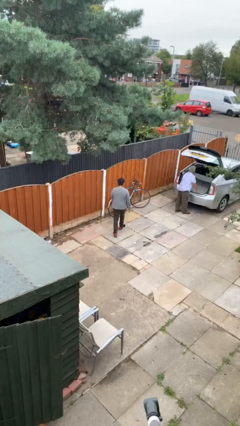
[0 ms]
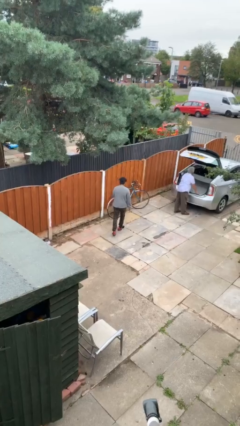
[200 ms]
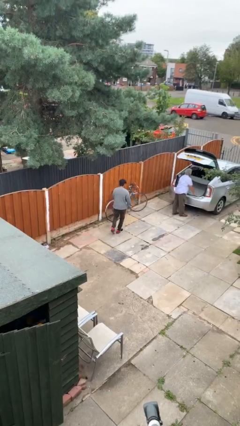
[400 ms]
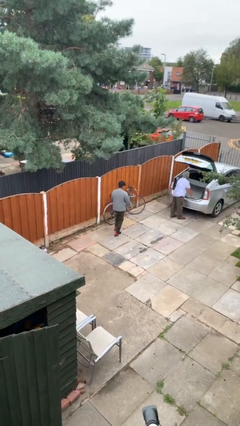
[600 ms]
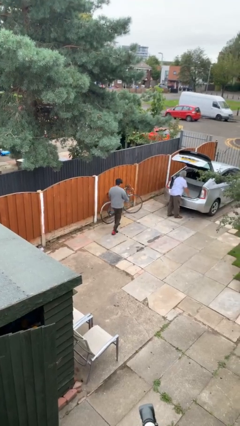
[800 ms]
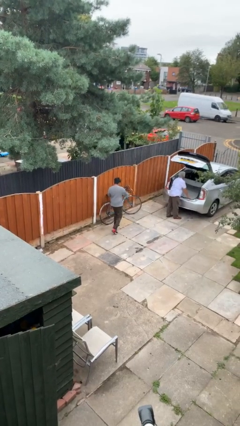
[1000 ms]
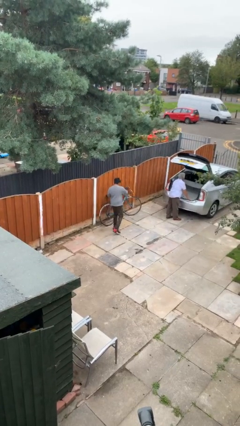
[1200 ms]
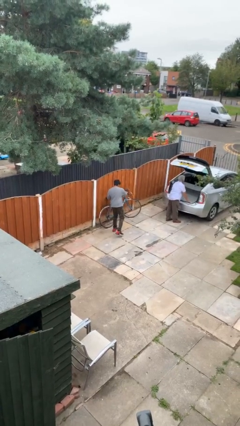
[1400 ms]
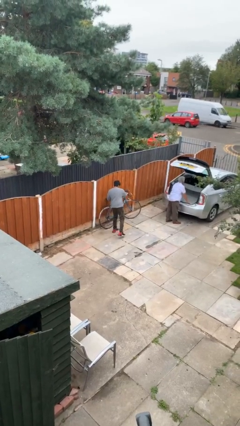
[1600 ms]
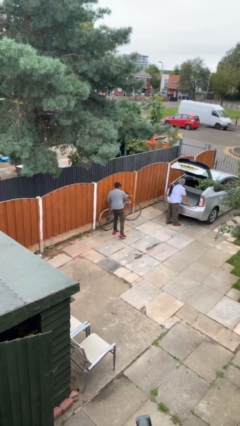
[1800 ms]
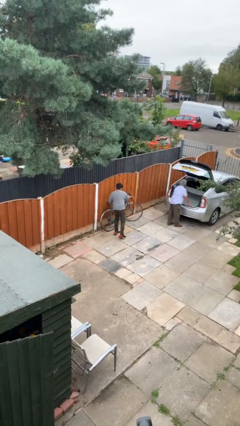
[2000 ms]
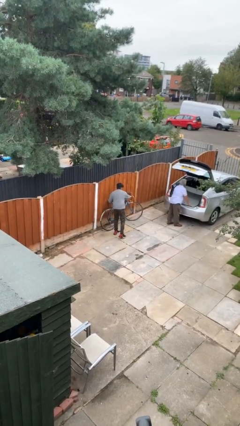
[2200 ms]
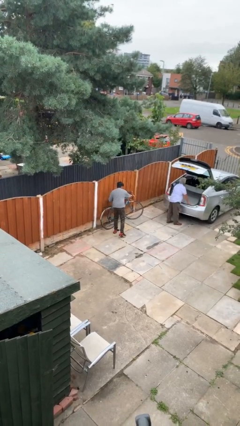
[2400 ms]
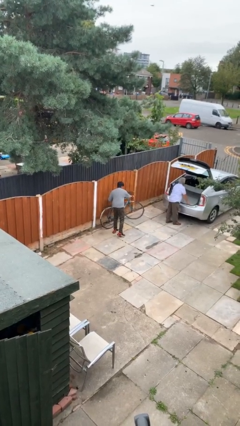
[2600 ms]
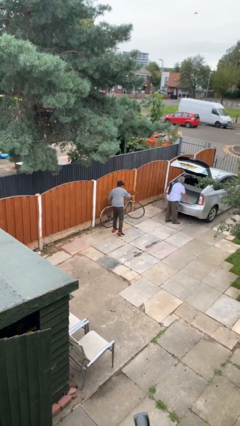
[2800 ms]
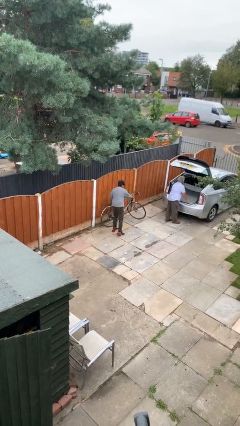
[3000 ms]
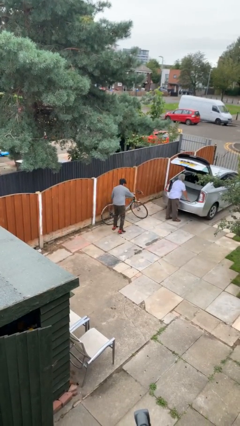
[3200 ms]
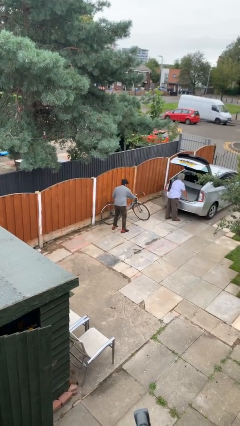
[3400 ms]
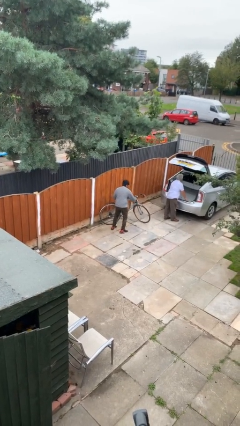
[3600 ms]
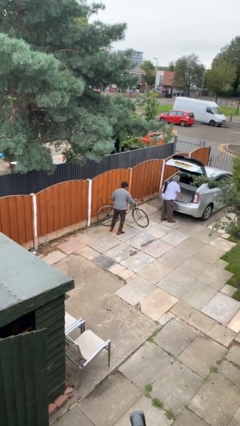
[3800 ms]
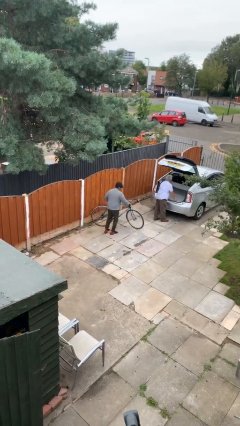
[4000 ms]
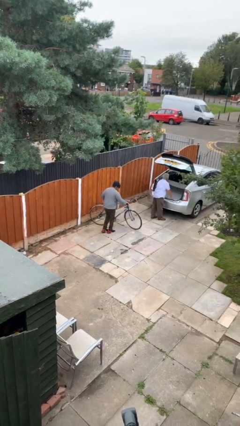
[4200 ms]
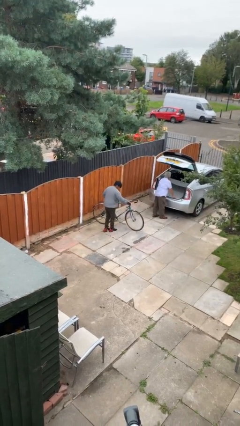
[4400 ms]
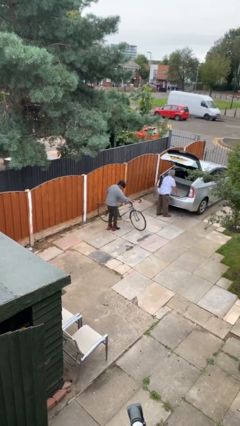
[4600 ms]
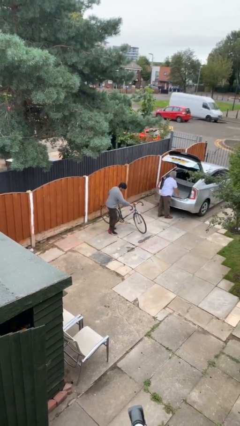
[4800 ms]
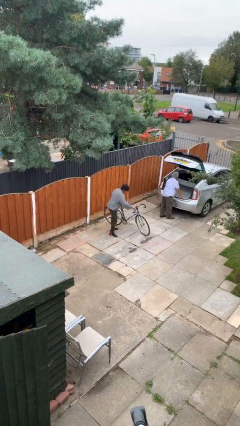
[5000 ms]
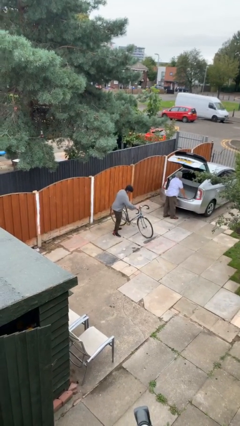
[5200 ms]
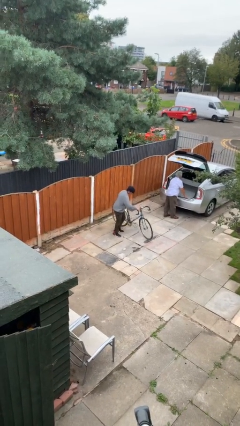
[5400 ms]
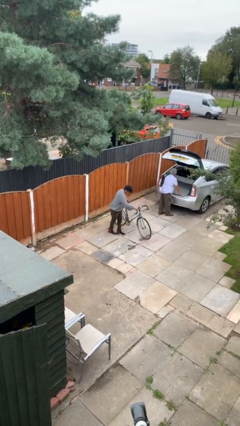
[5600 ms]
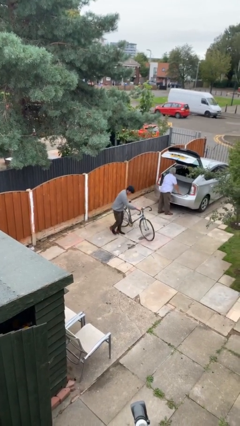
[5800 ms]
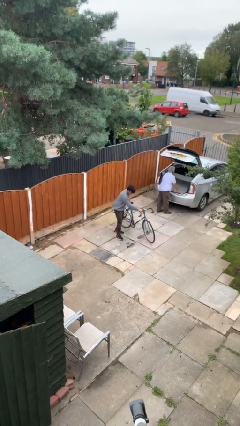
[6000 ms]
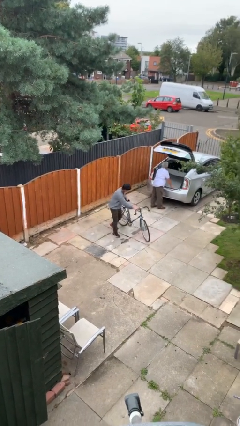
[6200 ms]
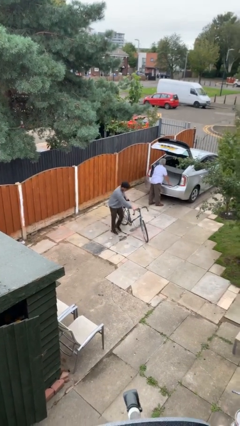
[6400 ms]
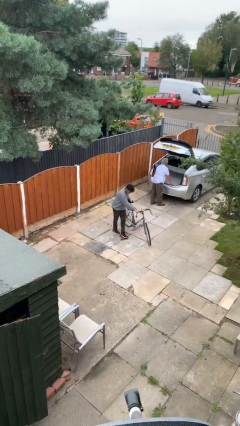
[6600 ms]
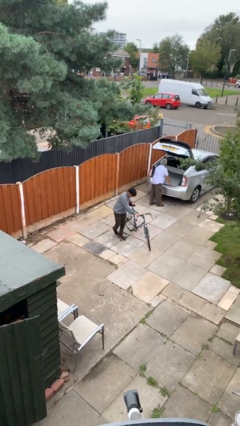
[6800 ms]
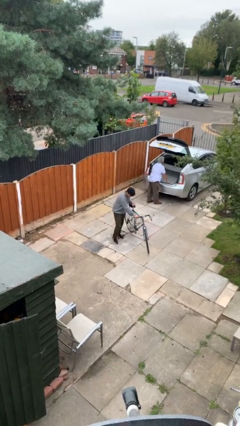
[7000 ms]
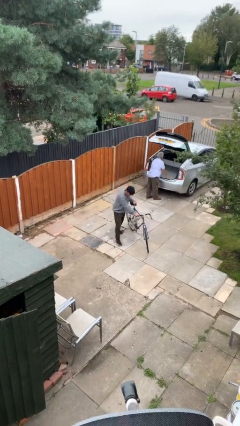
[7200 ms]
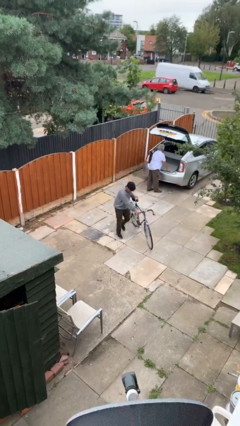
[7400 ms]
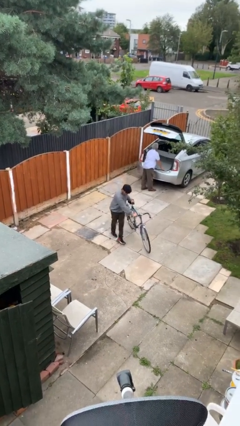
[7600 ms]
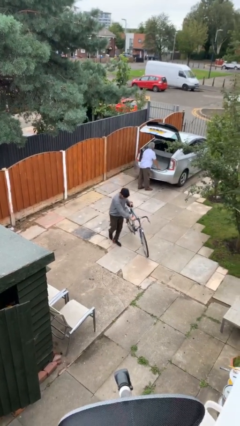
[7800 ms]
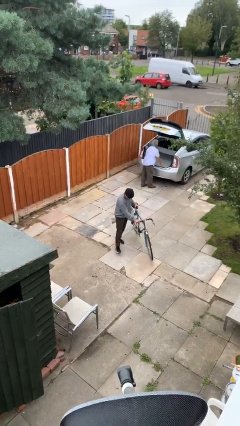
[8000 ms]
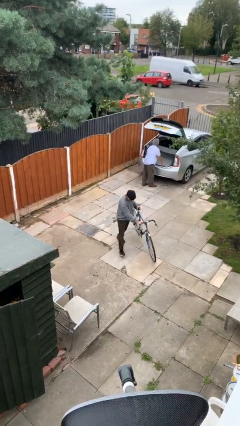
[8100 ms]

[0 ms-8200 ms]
person steals object from person

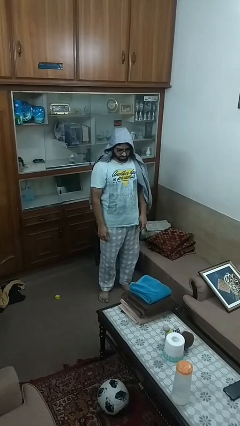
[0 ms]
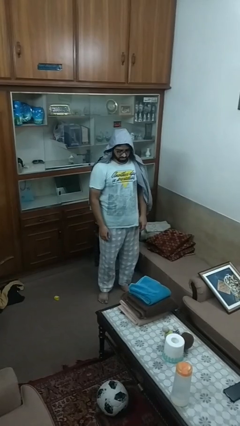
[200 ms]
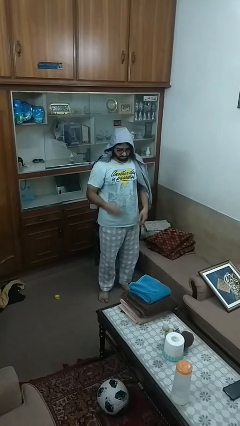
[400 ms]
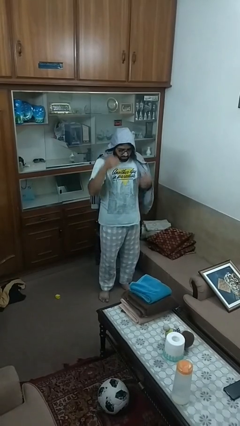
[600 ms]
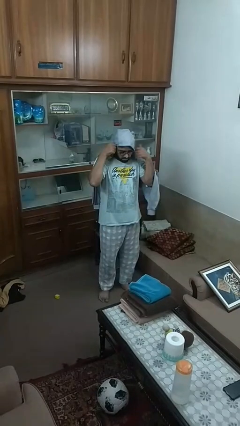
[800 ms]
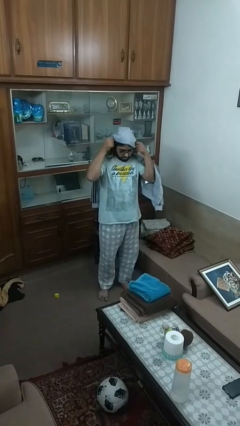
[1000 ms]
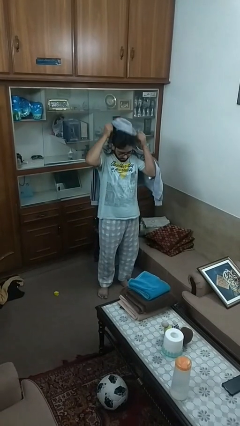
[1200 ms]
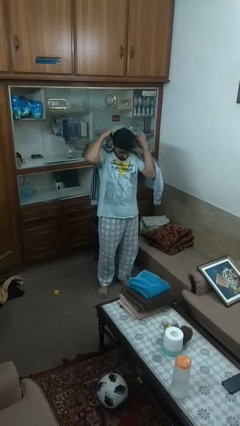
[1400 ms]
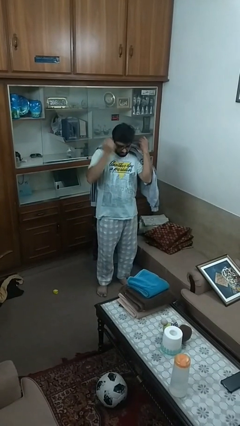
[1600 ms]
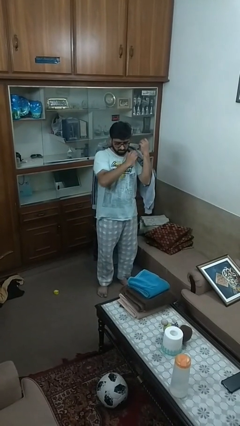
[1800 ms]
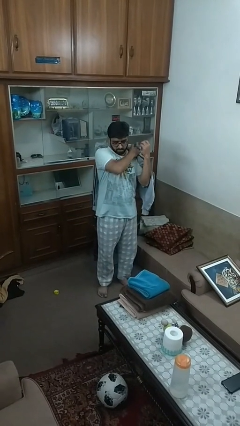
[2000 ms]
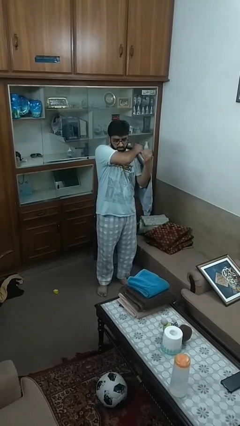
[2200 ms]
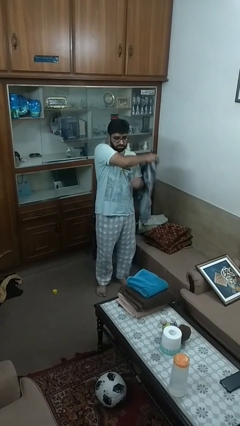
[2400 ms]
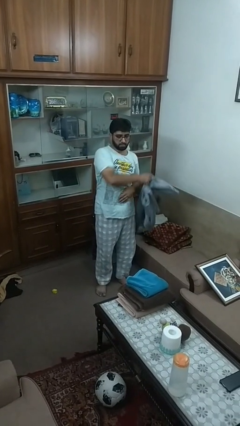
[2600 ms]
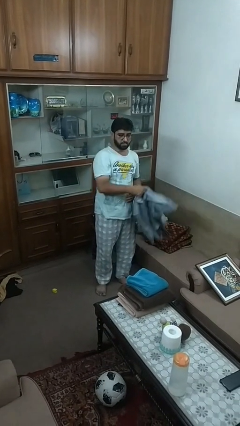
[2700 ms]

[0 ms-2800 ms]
person takes off hoodie

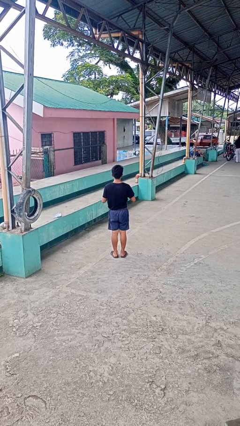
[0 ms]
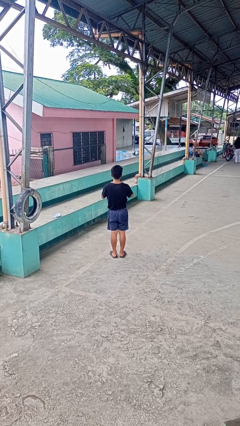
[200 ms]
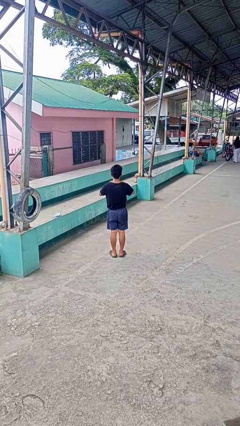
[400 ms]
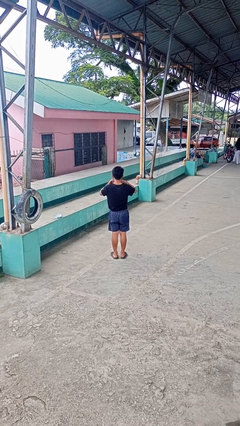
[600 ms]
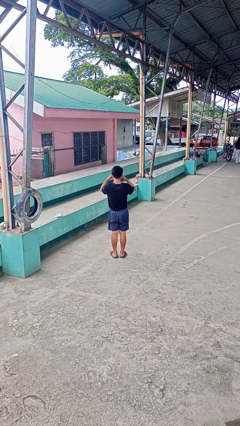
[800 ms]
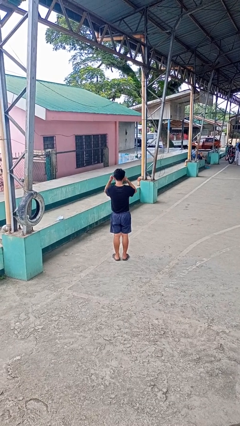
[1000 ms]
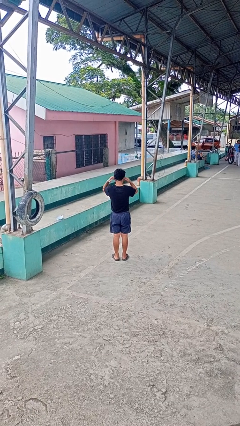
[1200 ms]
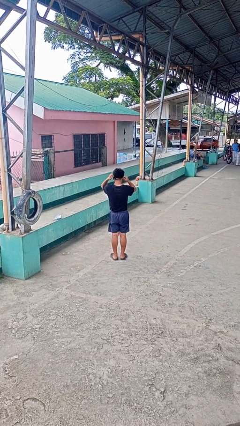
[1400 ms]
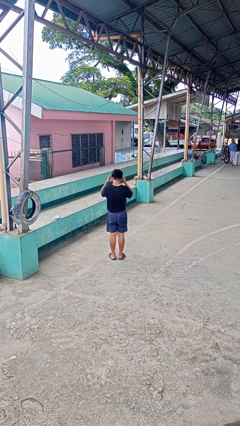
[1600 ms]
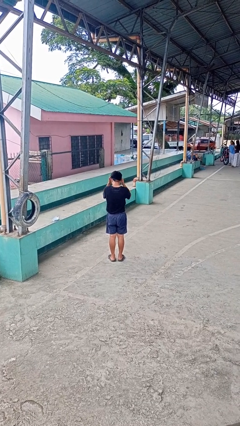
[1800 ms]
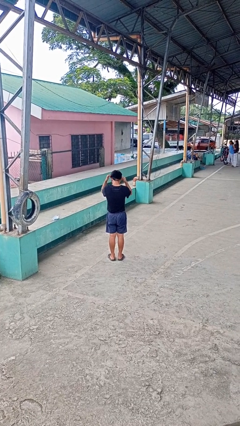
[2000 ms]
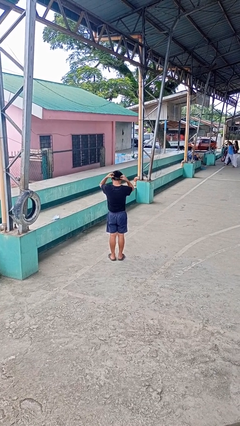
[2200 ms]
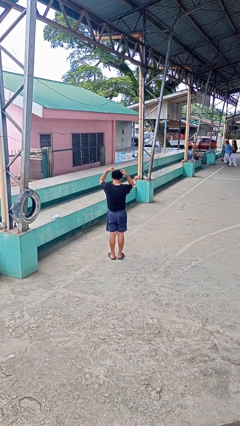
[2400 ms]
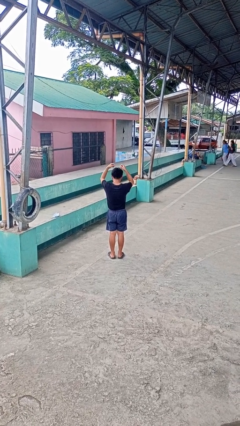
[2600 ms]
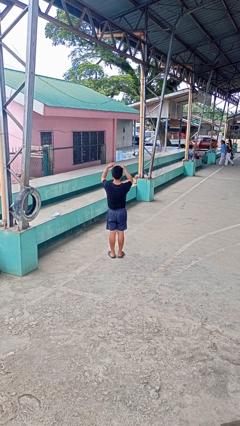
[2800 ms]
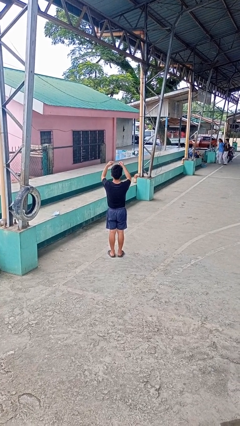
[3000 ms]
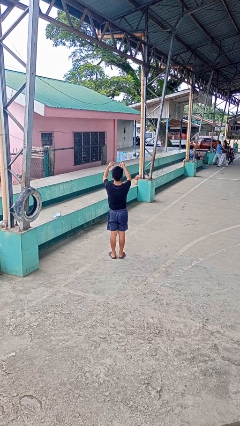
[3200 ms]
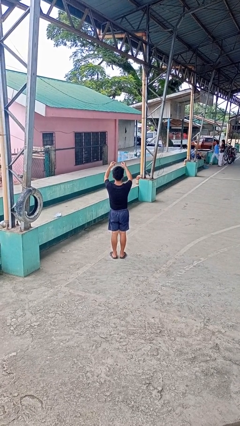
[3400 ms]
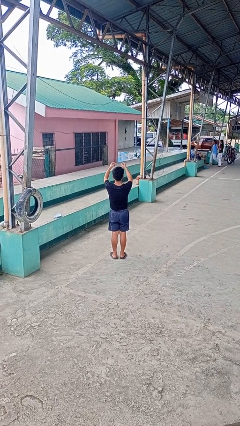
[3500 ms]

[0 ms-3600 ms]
person takes off necklace

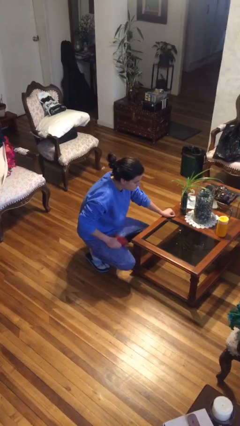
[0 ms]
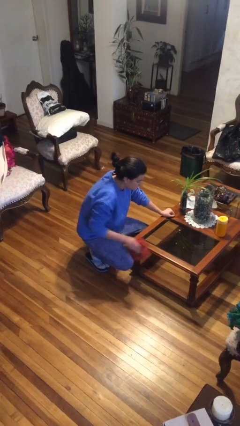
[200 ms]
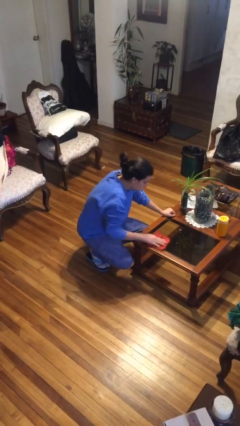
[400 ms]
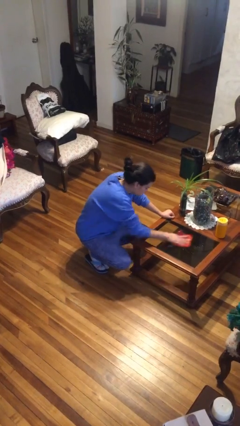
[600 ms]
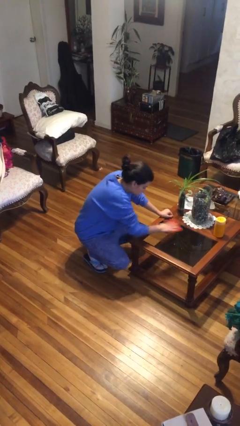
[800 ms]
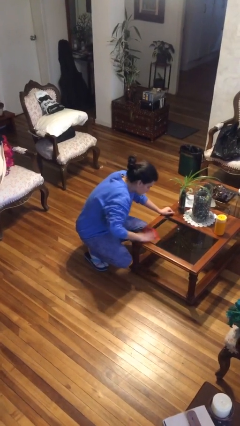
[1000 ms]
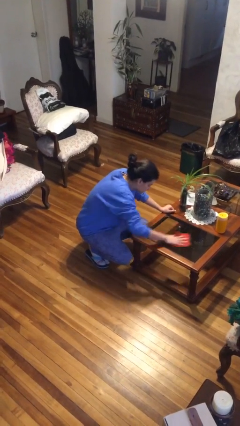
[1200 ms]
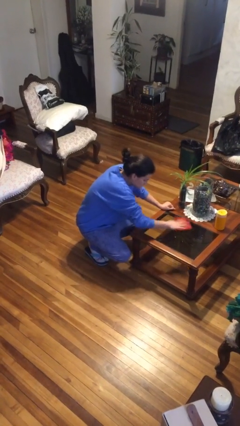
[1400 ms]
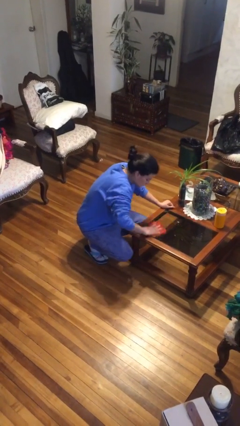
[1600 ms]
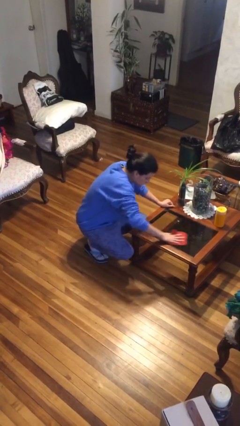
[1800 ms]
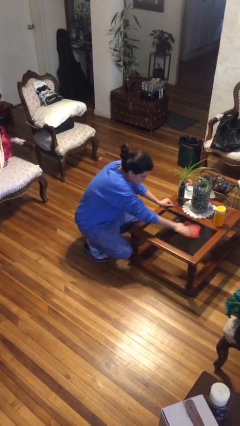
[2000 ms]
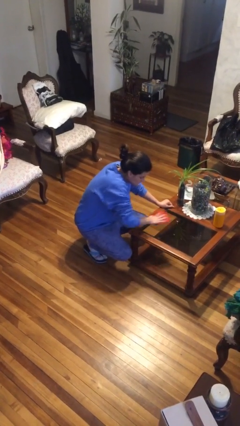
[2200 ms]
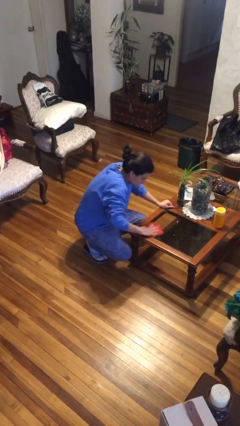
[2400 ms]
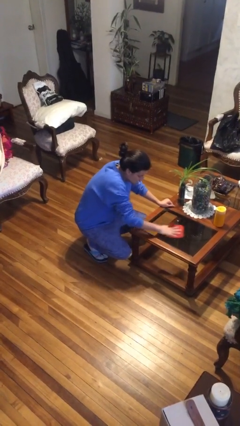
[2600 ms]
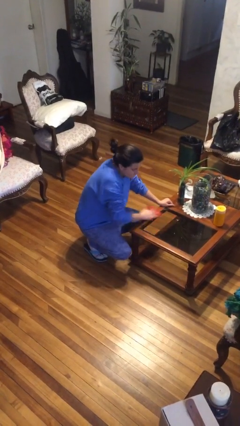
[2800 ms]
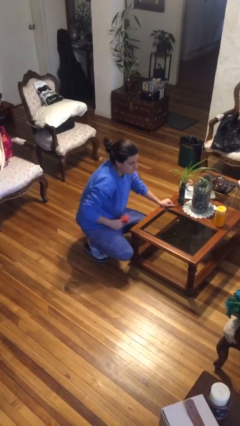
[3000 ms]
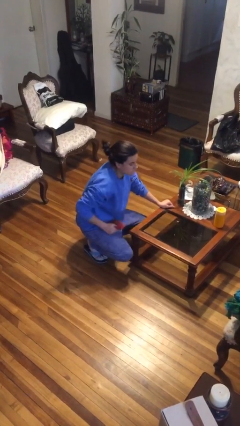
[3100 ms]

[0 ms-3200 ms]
person cleans table with rag
